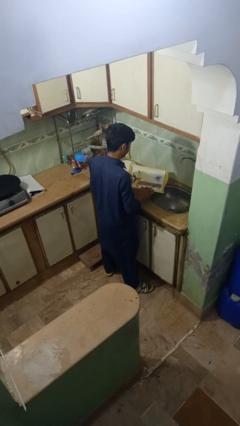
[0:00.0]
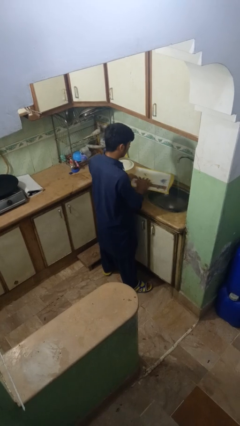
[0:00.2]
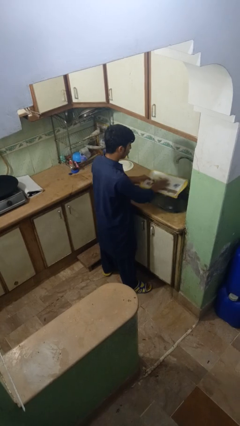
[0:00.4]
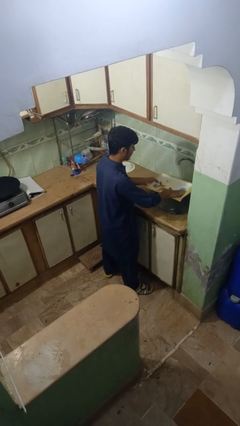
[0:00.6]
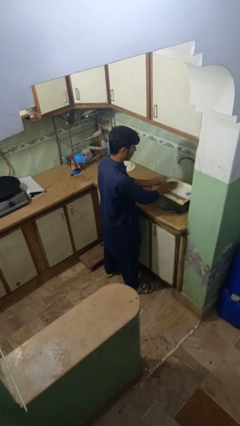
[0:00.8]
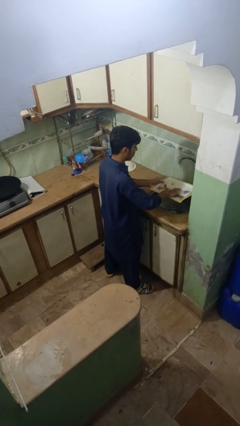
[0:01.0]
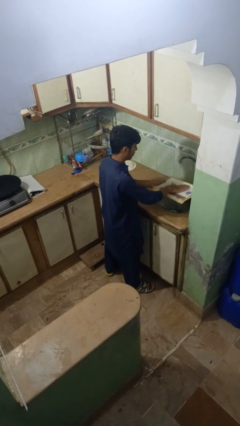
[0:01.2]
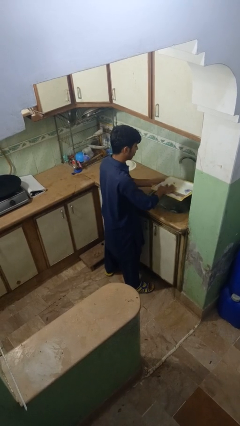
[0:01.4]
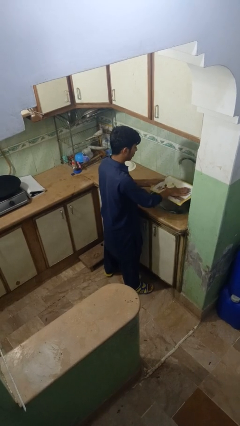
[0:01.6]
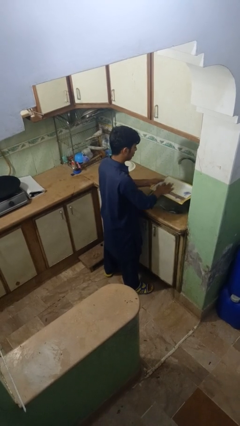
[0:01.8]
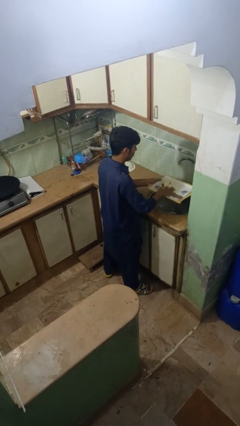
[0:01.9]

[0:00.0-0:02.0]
person washes dish

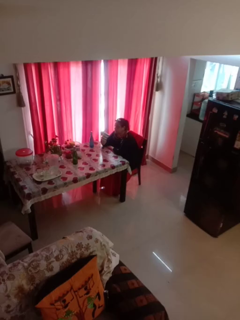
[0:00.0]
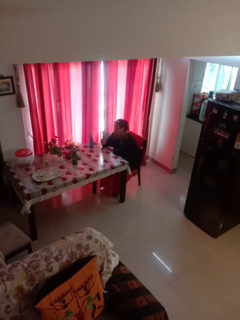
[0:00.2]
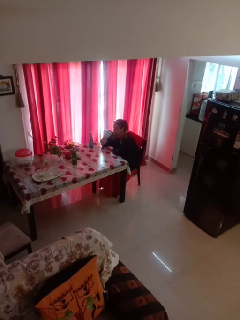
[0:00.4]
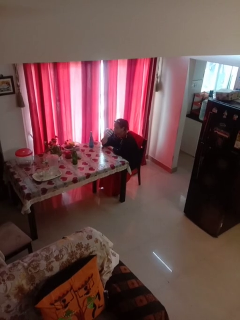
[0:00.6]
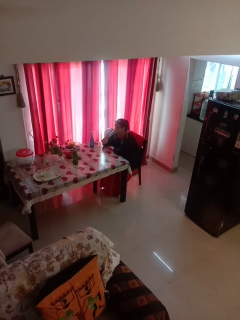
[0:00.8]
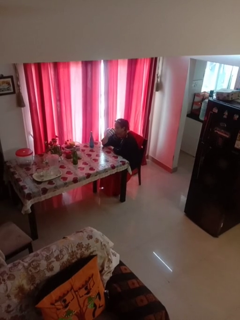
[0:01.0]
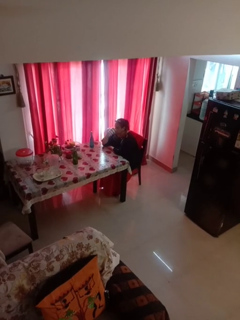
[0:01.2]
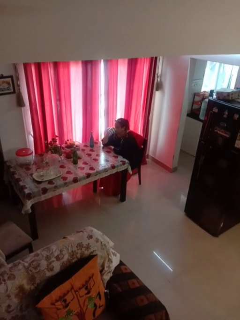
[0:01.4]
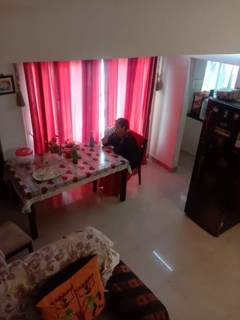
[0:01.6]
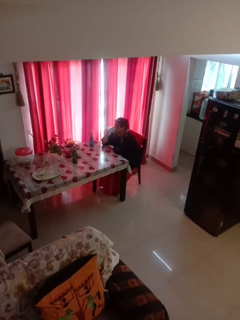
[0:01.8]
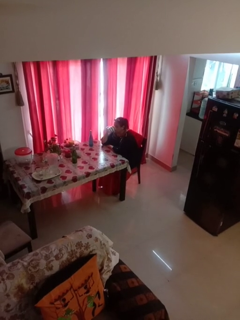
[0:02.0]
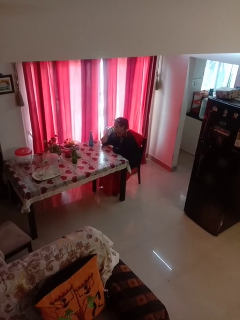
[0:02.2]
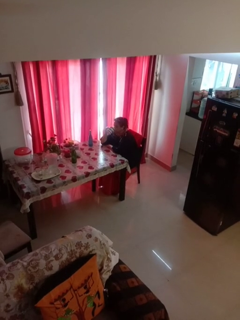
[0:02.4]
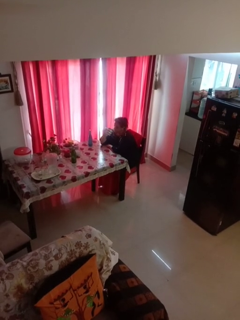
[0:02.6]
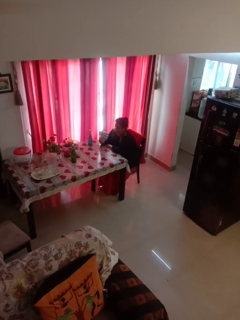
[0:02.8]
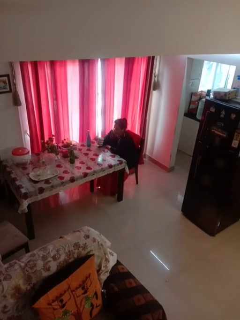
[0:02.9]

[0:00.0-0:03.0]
person drinks from mug

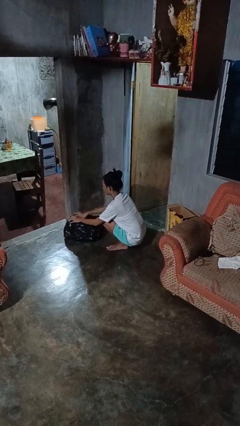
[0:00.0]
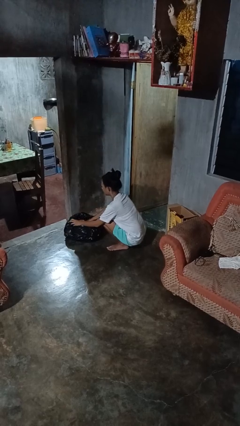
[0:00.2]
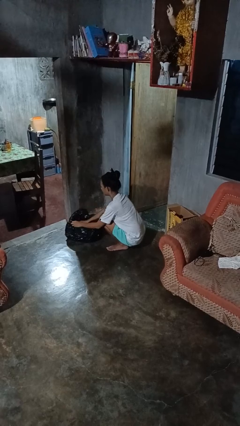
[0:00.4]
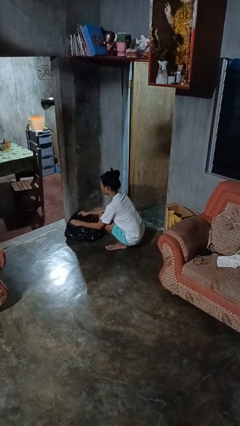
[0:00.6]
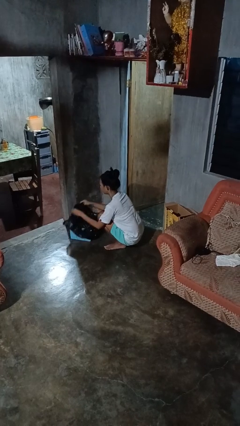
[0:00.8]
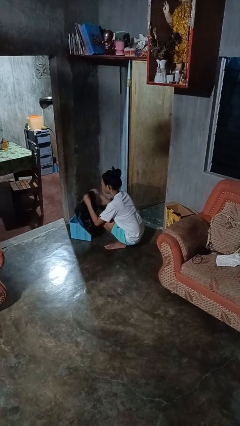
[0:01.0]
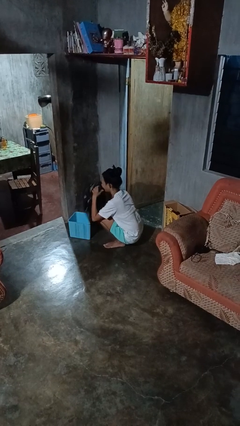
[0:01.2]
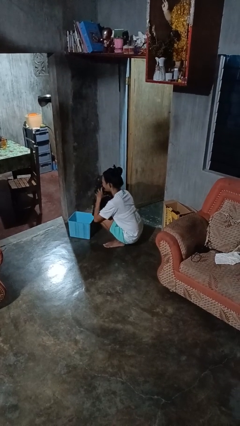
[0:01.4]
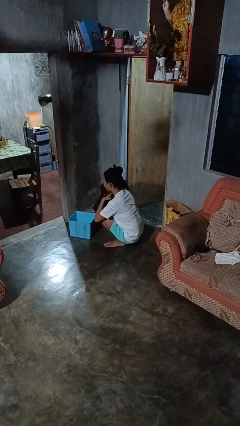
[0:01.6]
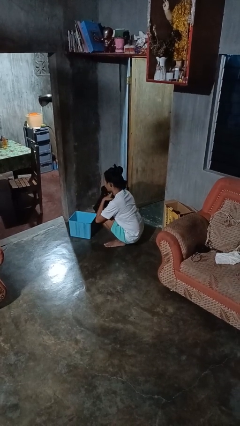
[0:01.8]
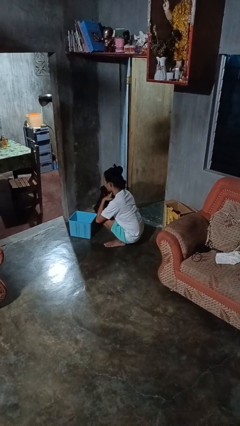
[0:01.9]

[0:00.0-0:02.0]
person removes trashbag from trashcan

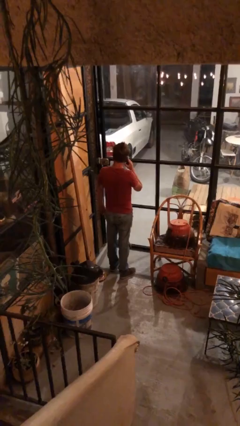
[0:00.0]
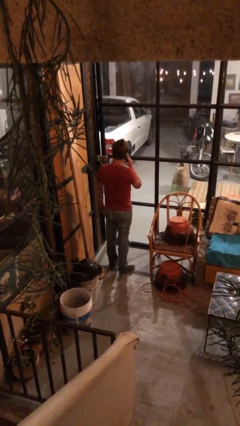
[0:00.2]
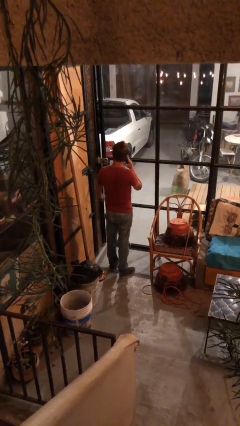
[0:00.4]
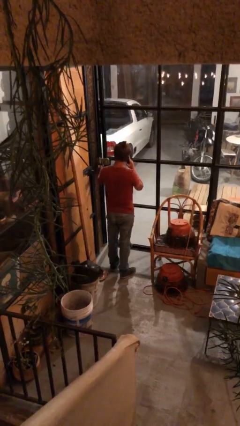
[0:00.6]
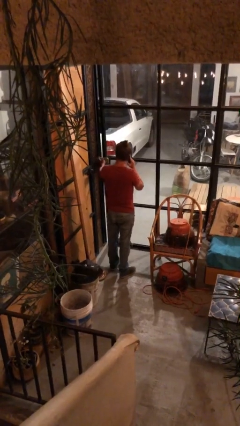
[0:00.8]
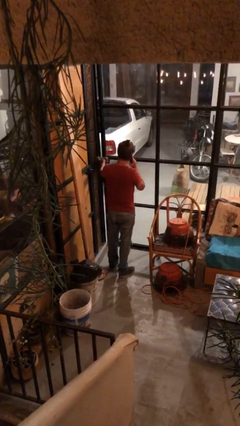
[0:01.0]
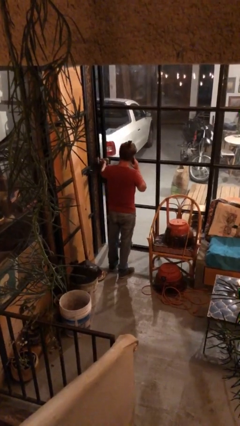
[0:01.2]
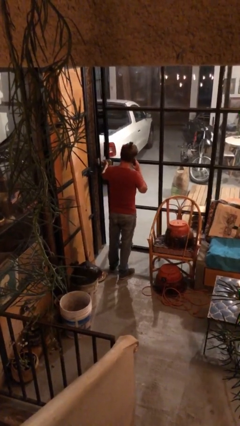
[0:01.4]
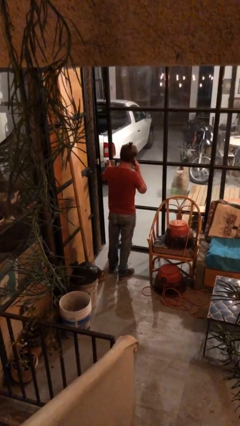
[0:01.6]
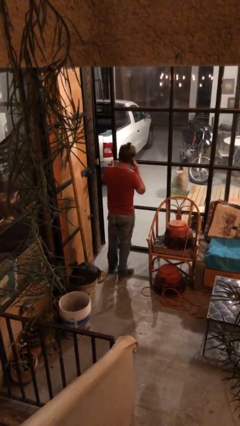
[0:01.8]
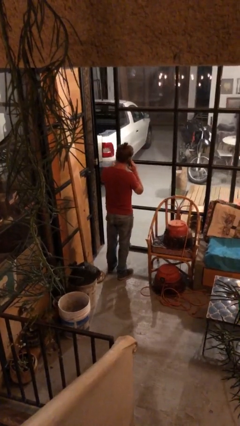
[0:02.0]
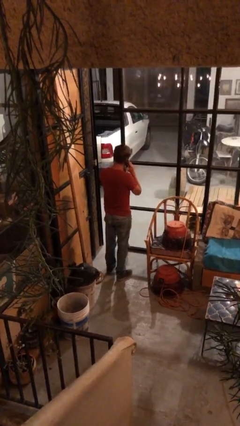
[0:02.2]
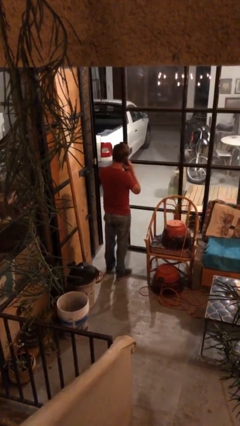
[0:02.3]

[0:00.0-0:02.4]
person opens facility door

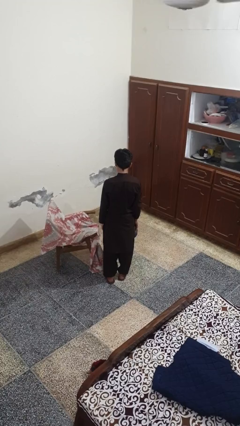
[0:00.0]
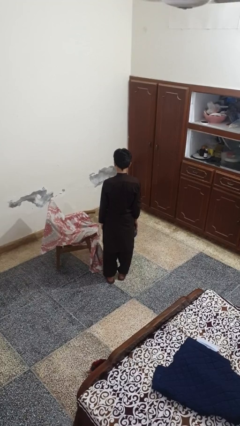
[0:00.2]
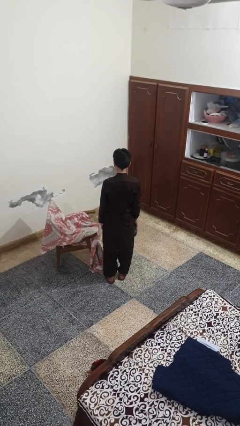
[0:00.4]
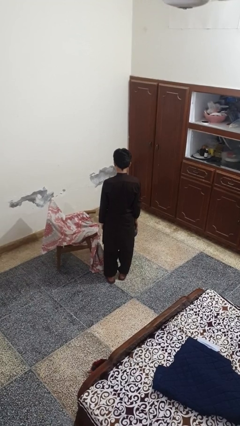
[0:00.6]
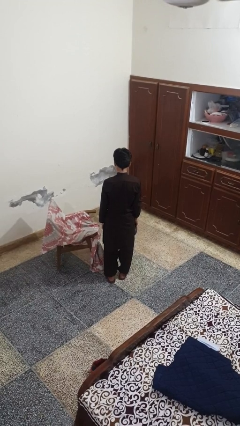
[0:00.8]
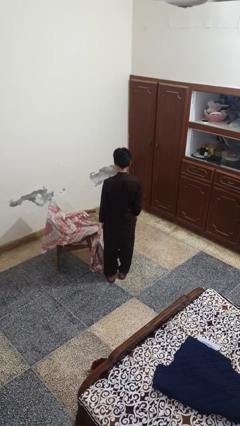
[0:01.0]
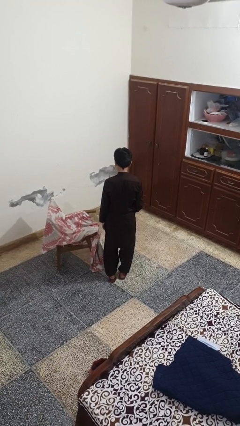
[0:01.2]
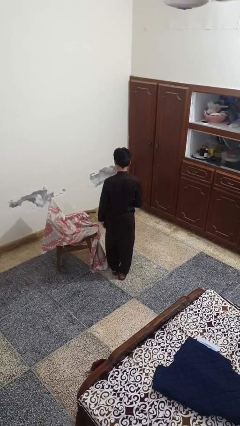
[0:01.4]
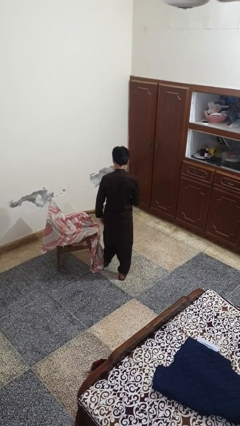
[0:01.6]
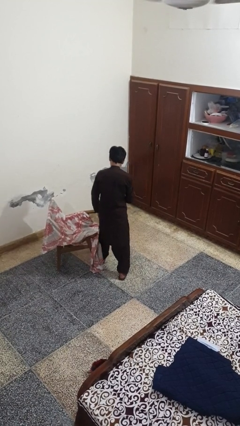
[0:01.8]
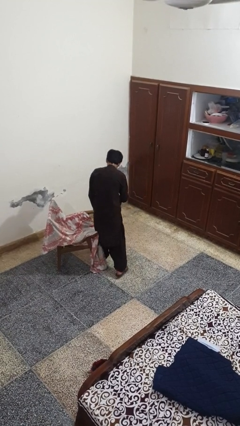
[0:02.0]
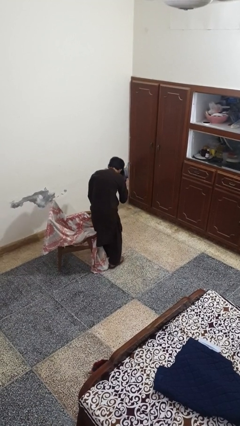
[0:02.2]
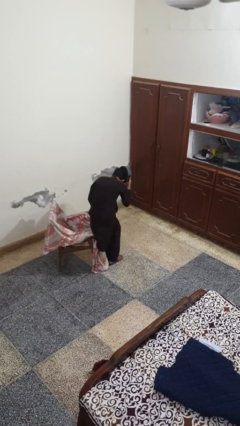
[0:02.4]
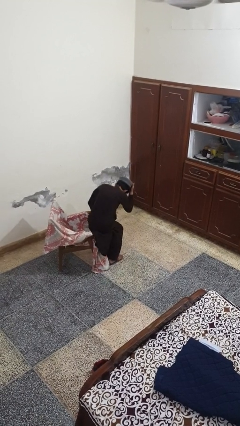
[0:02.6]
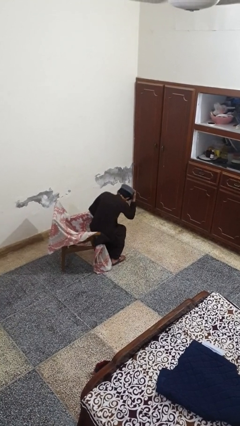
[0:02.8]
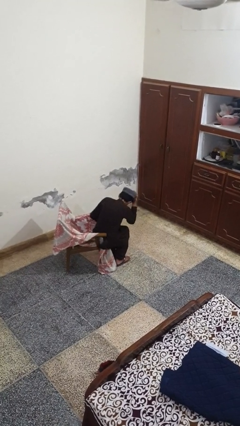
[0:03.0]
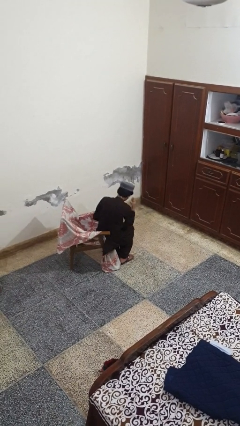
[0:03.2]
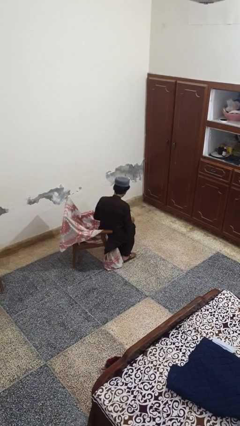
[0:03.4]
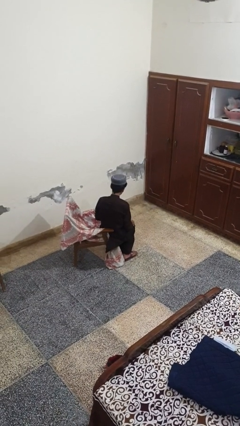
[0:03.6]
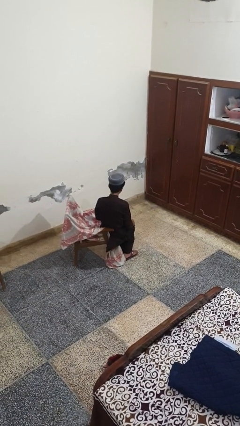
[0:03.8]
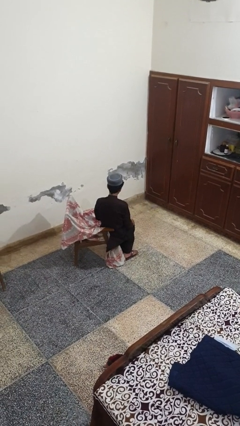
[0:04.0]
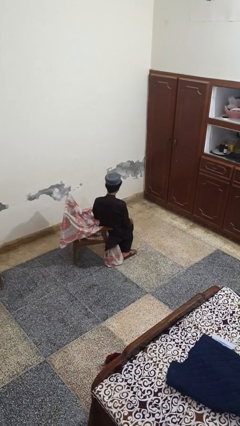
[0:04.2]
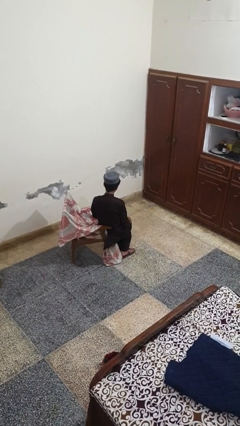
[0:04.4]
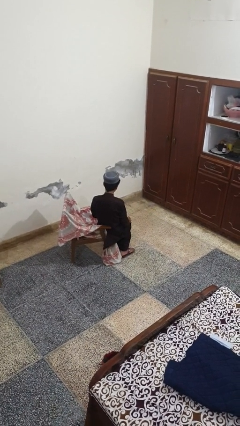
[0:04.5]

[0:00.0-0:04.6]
person puts on hat

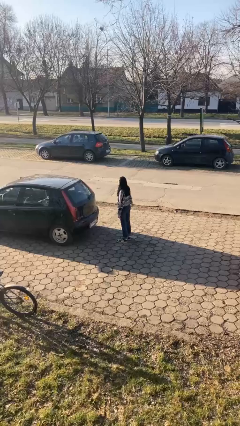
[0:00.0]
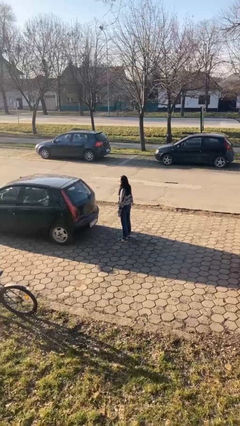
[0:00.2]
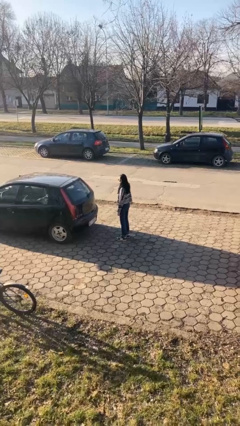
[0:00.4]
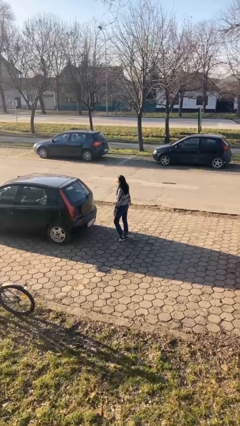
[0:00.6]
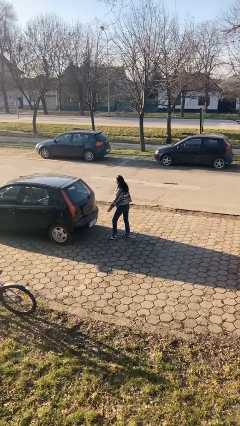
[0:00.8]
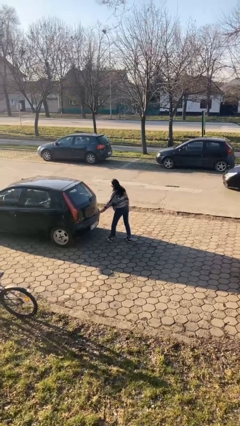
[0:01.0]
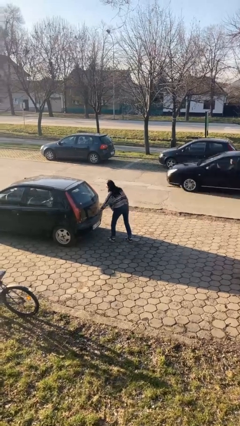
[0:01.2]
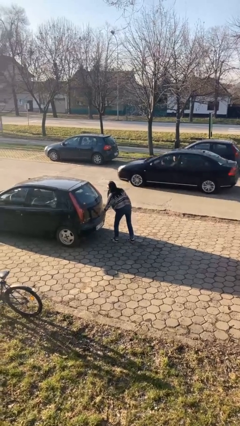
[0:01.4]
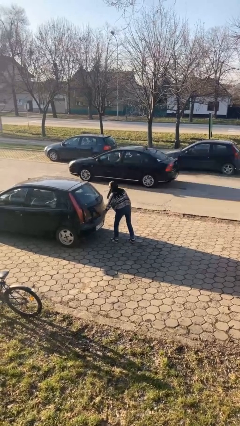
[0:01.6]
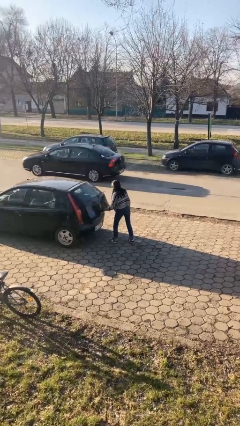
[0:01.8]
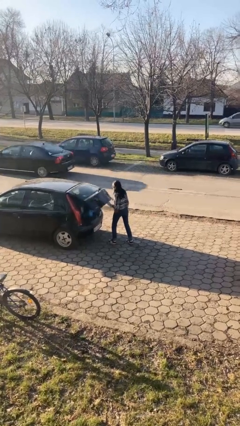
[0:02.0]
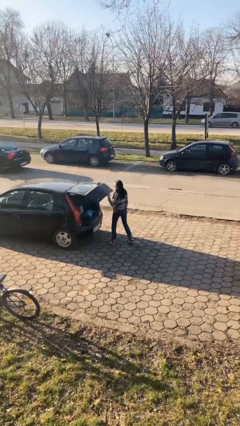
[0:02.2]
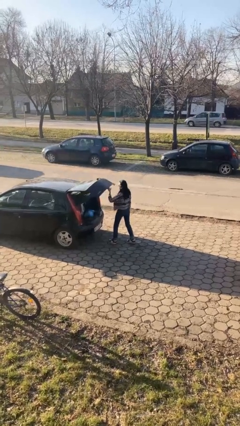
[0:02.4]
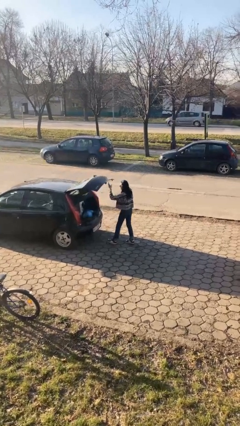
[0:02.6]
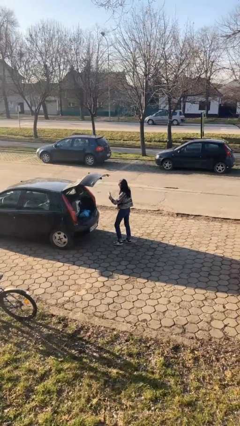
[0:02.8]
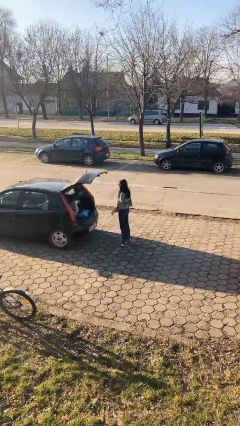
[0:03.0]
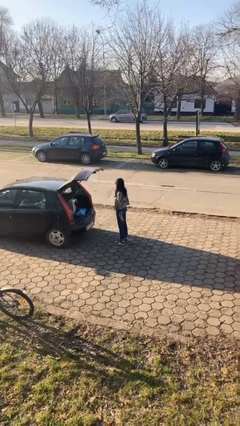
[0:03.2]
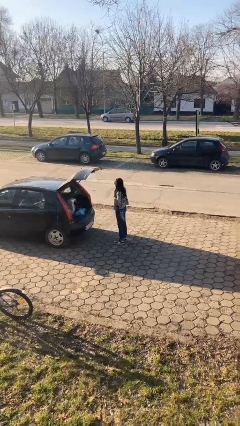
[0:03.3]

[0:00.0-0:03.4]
person opens car trunk

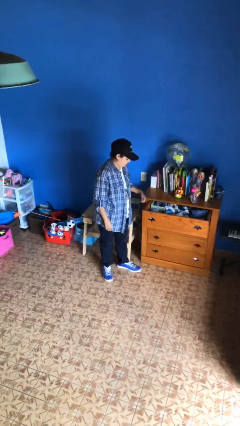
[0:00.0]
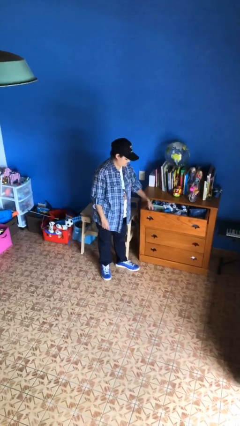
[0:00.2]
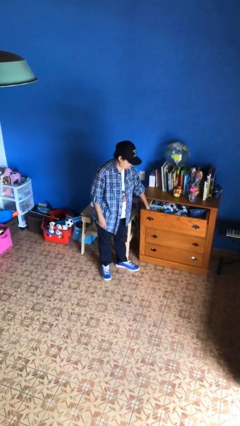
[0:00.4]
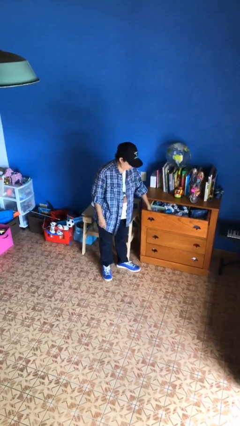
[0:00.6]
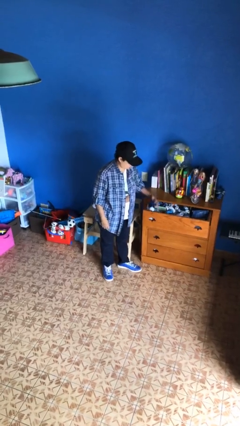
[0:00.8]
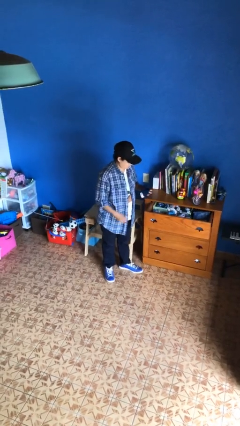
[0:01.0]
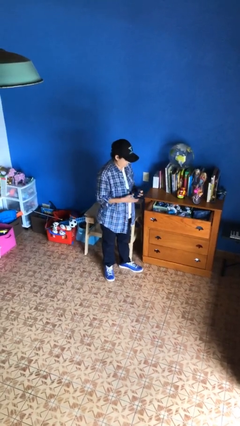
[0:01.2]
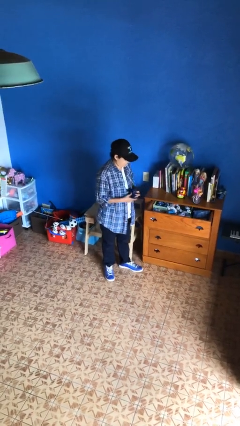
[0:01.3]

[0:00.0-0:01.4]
person takes clothes from dresser
